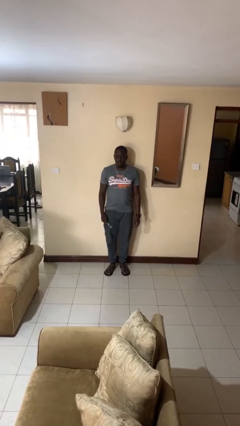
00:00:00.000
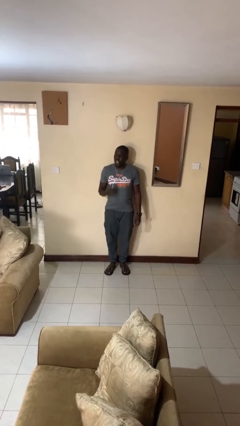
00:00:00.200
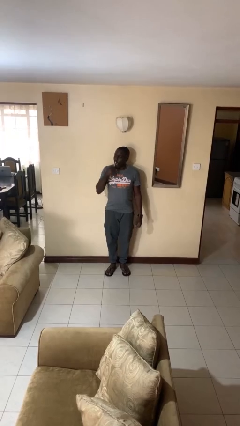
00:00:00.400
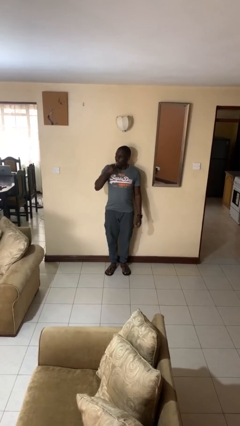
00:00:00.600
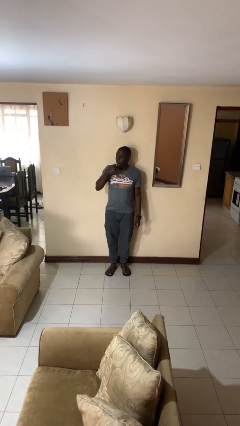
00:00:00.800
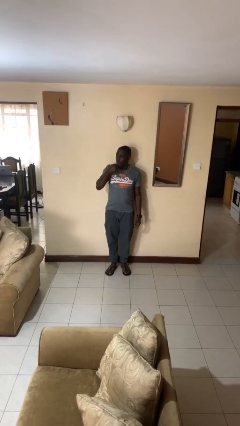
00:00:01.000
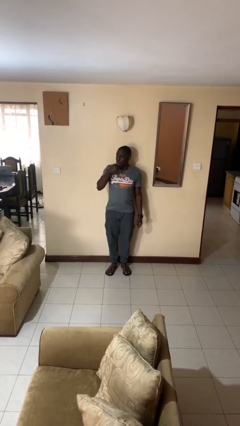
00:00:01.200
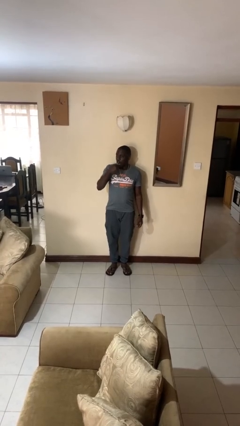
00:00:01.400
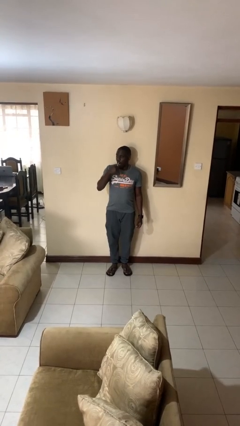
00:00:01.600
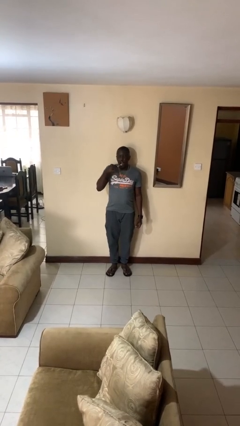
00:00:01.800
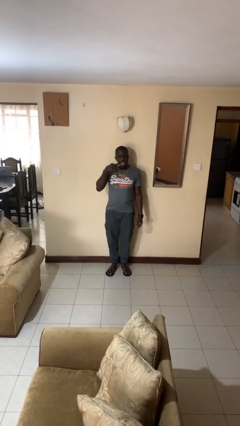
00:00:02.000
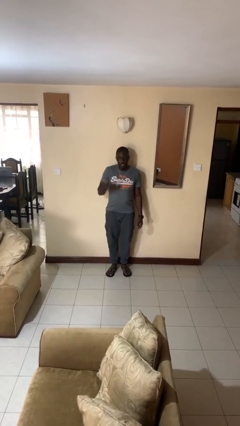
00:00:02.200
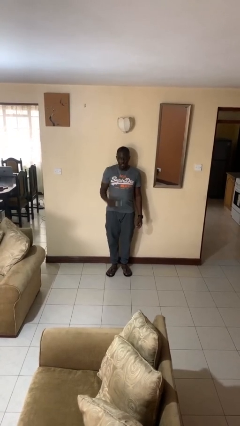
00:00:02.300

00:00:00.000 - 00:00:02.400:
person brushes teeth

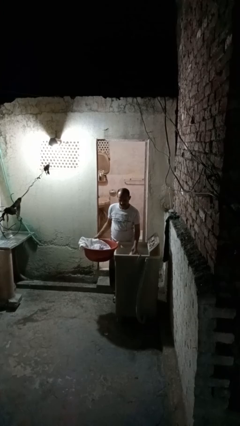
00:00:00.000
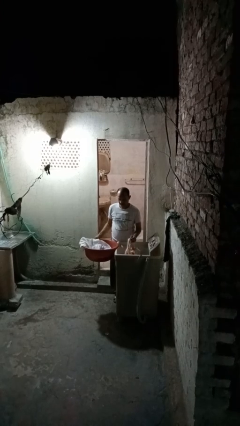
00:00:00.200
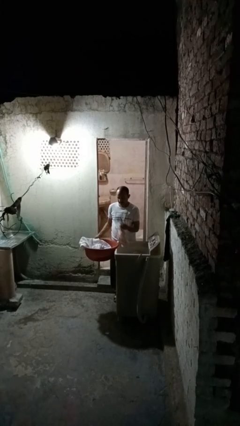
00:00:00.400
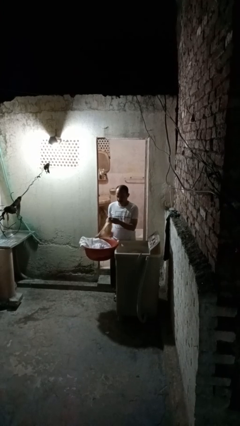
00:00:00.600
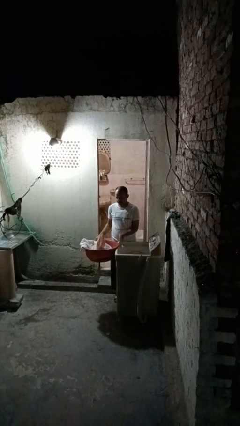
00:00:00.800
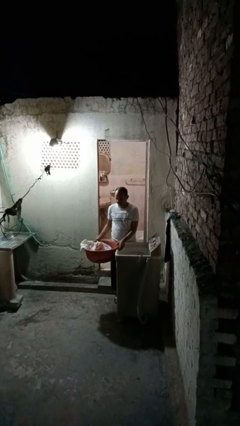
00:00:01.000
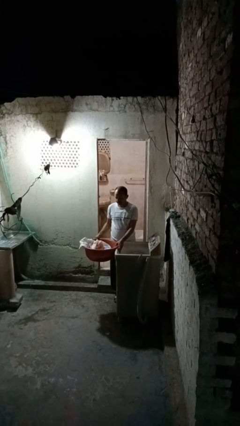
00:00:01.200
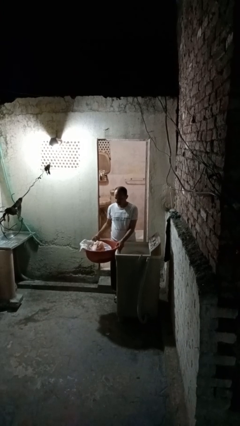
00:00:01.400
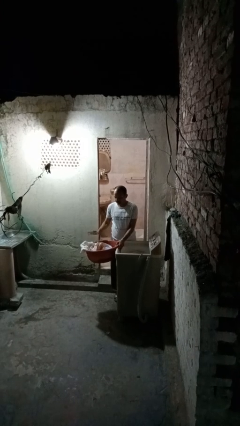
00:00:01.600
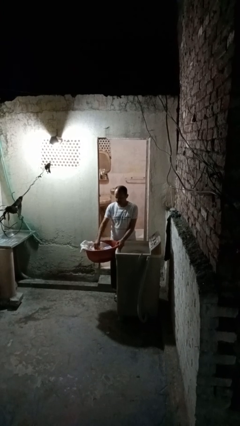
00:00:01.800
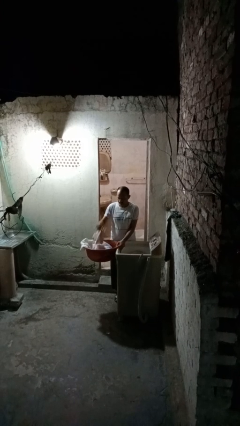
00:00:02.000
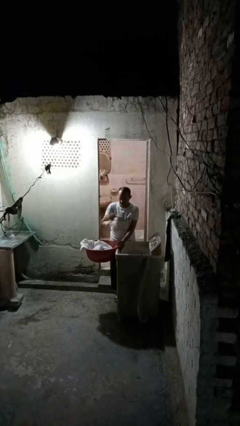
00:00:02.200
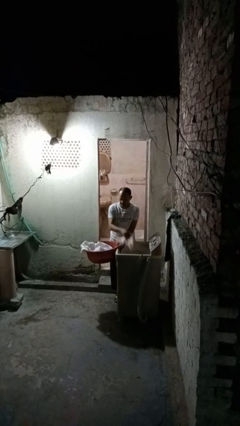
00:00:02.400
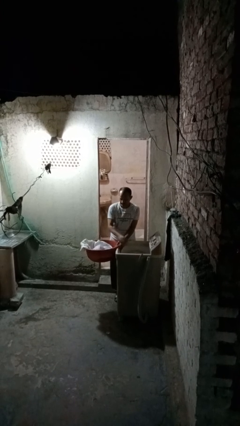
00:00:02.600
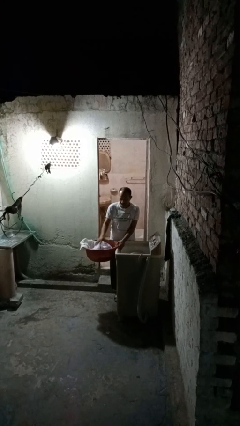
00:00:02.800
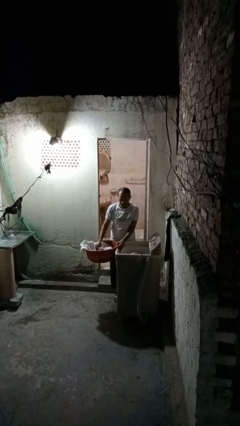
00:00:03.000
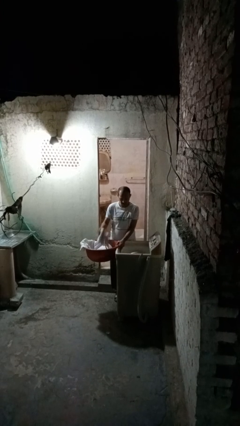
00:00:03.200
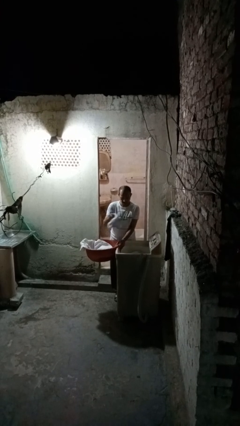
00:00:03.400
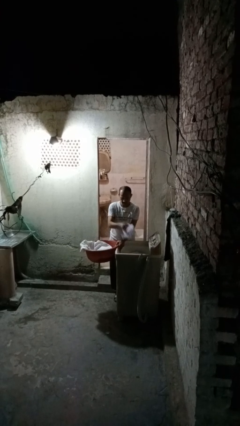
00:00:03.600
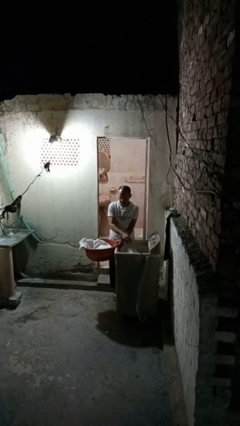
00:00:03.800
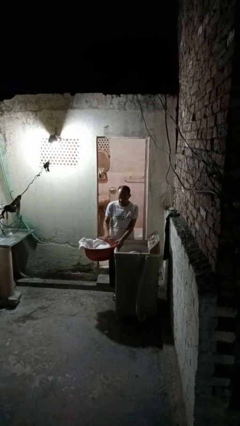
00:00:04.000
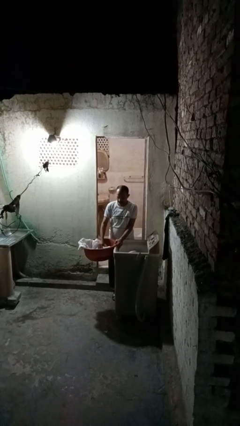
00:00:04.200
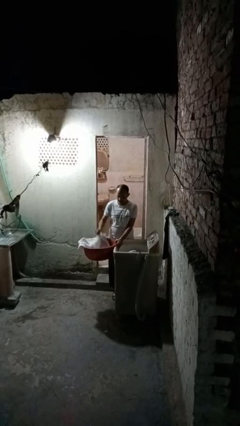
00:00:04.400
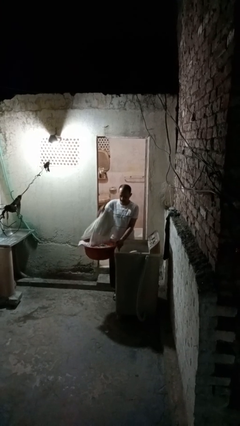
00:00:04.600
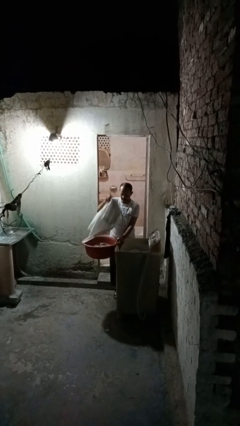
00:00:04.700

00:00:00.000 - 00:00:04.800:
person loads clotheswasher

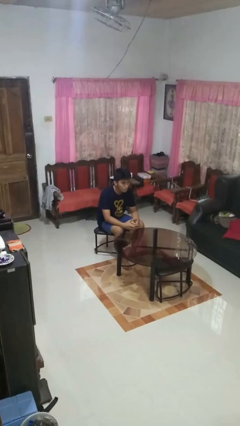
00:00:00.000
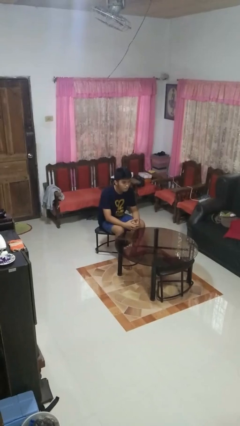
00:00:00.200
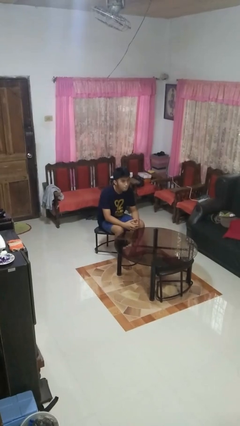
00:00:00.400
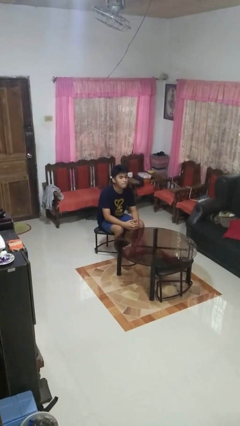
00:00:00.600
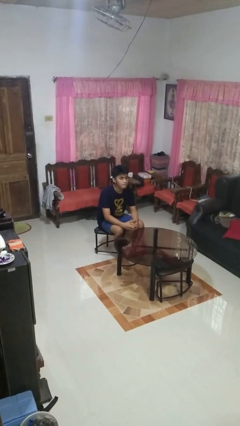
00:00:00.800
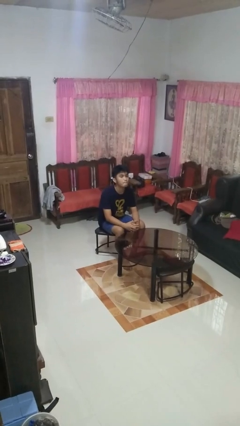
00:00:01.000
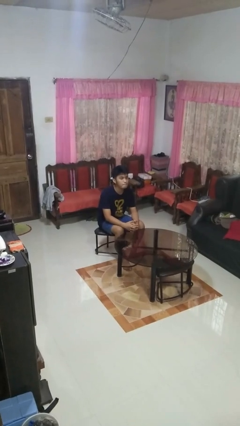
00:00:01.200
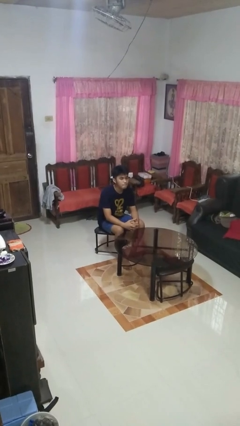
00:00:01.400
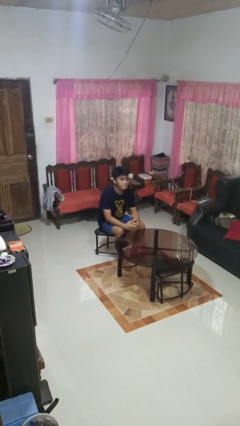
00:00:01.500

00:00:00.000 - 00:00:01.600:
person nods head

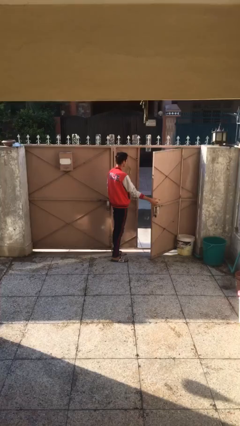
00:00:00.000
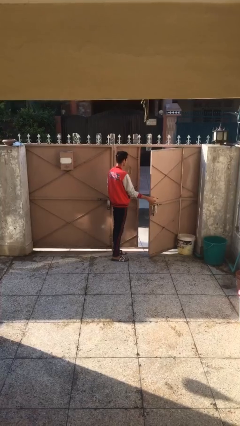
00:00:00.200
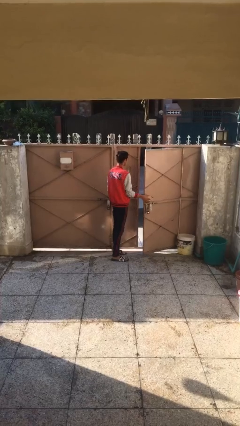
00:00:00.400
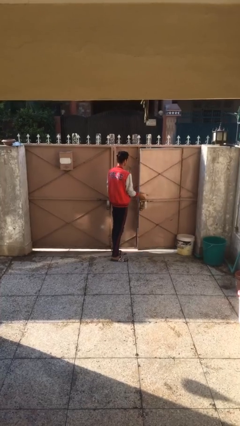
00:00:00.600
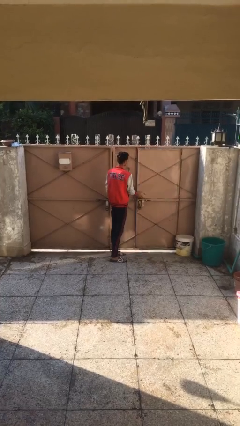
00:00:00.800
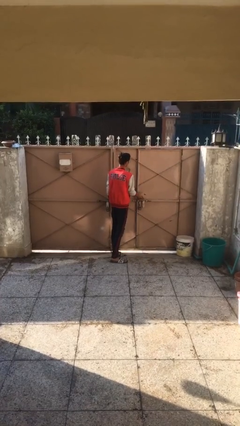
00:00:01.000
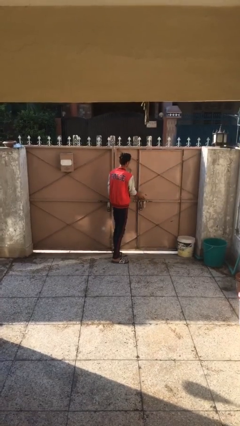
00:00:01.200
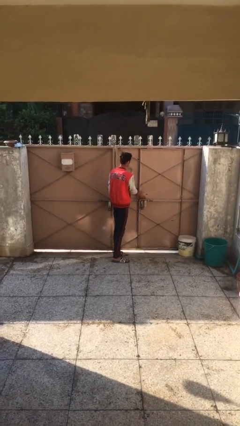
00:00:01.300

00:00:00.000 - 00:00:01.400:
person closes facility door

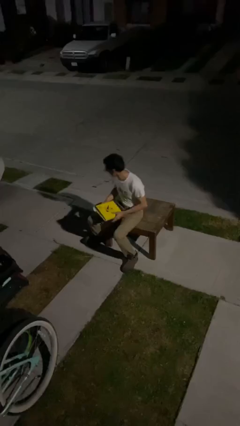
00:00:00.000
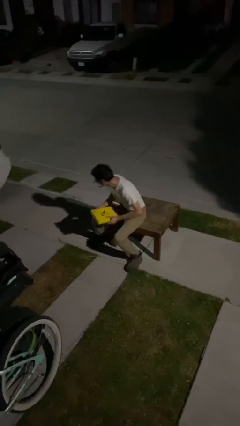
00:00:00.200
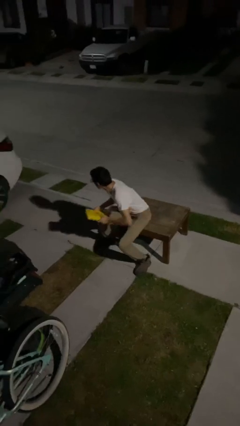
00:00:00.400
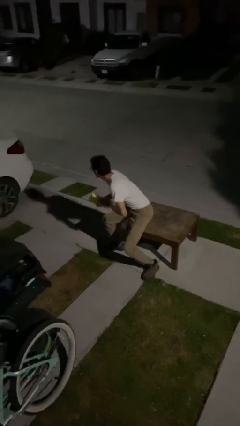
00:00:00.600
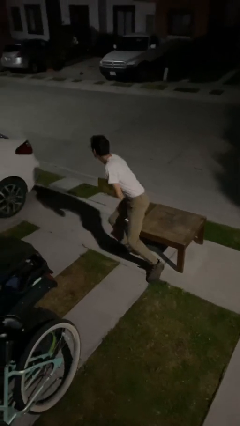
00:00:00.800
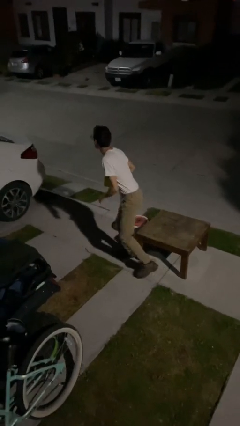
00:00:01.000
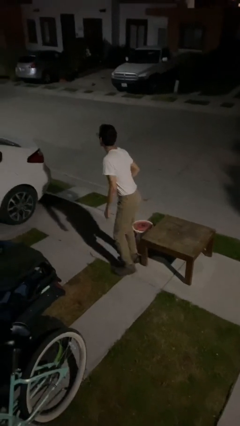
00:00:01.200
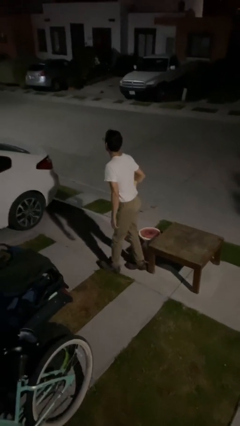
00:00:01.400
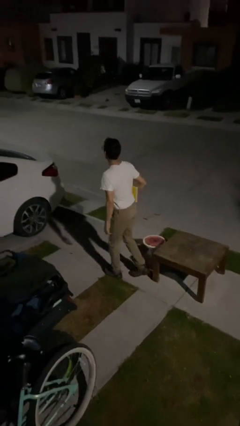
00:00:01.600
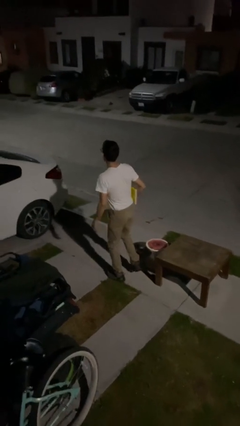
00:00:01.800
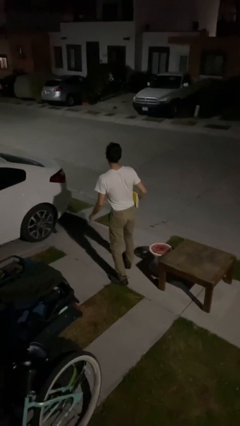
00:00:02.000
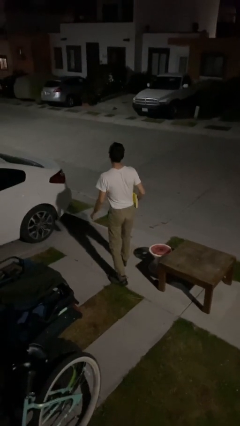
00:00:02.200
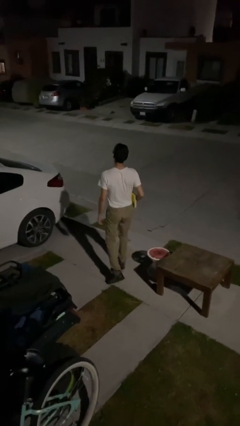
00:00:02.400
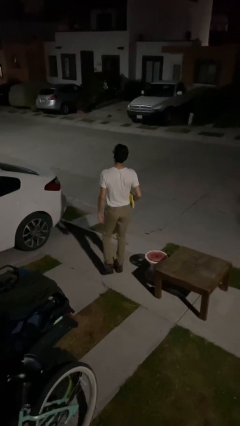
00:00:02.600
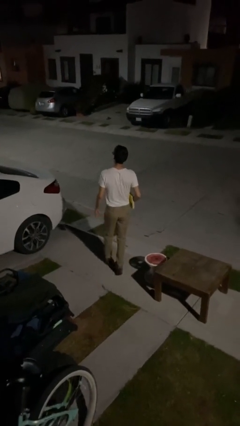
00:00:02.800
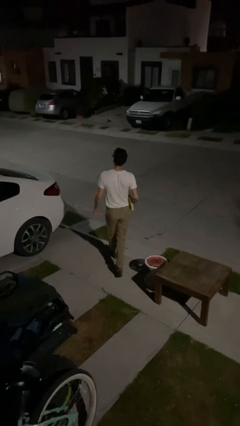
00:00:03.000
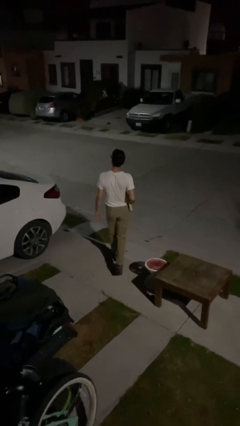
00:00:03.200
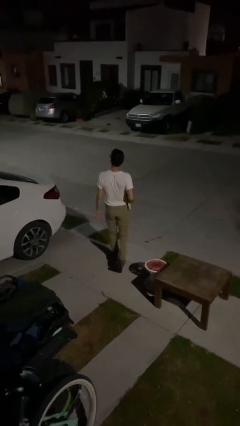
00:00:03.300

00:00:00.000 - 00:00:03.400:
person stands up

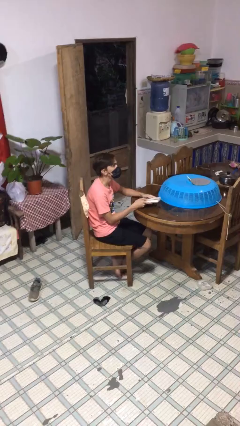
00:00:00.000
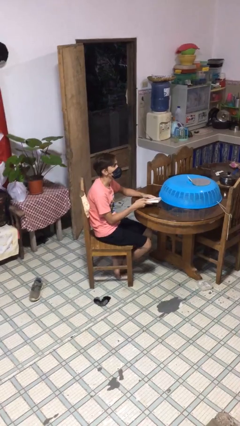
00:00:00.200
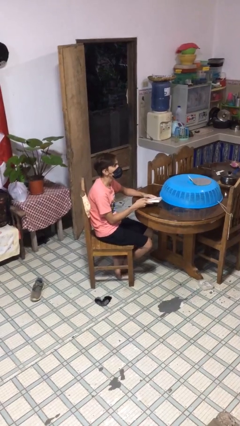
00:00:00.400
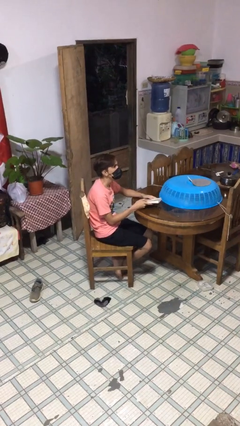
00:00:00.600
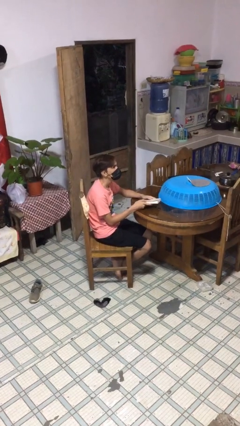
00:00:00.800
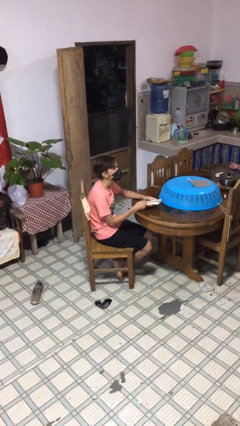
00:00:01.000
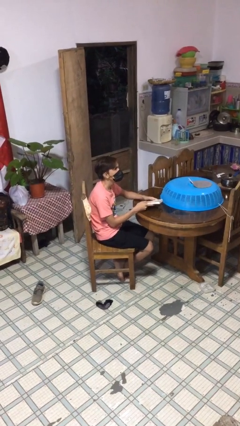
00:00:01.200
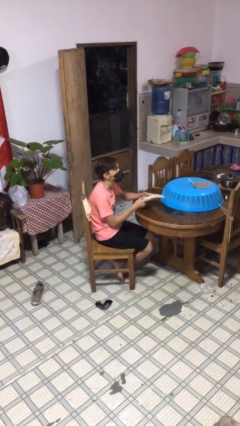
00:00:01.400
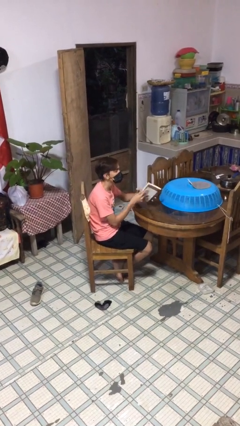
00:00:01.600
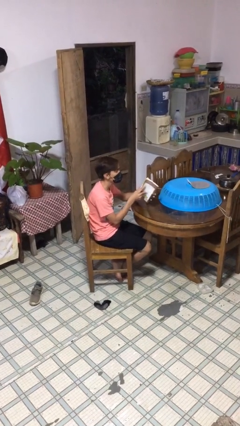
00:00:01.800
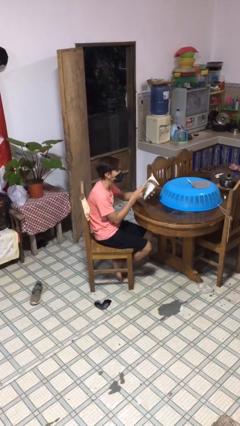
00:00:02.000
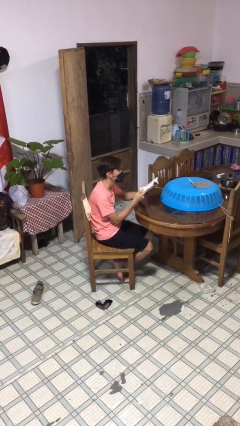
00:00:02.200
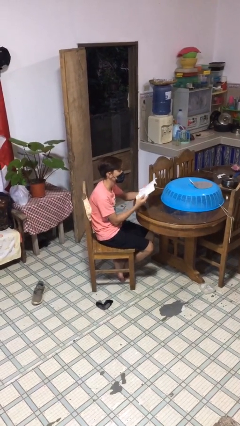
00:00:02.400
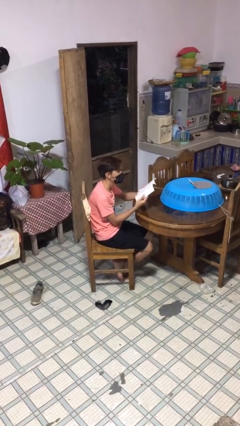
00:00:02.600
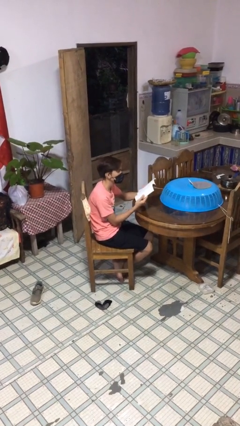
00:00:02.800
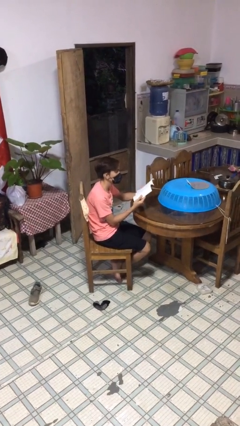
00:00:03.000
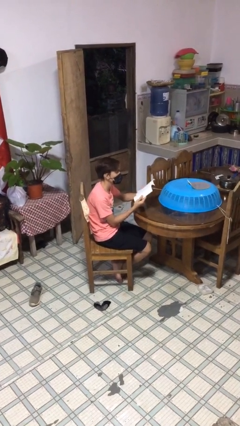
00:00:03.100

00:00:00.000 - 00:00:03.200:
person reads document

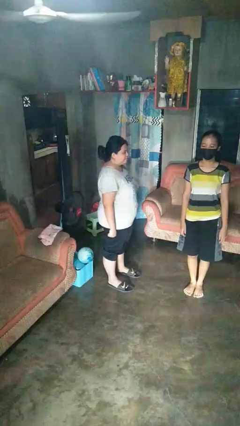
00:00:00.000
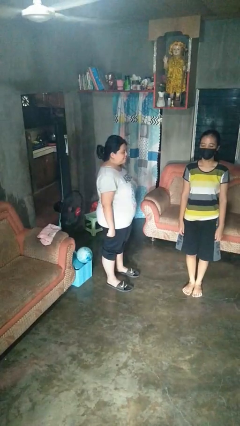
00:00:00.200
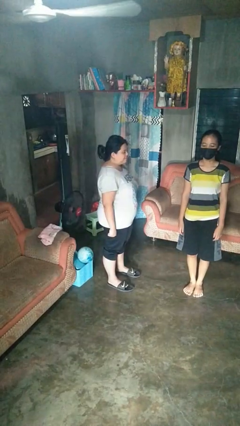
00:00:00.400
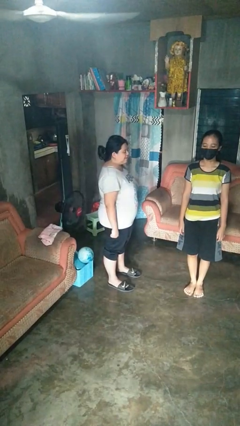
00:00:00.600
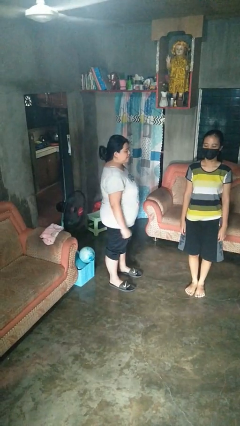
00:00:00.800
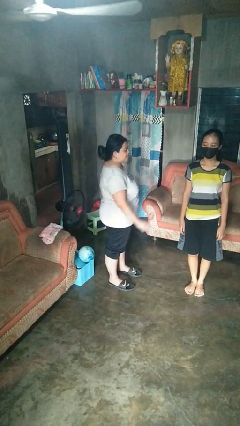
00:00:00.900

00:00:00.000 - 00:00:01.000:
person grabs person by forearm
